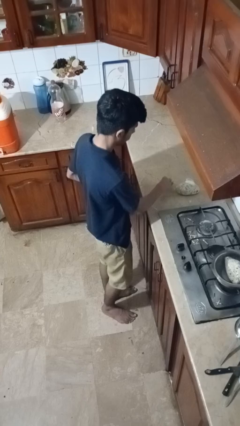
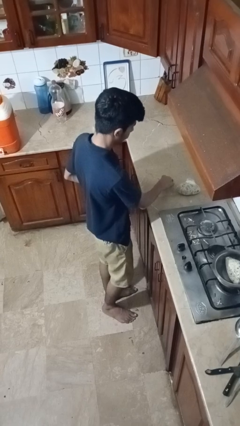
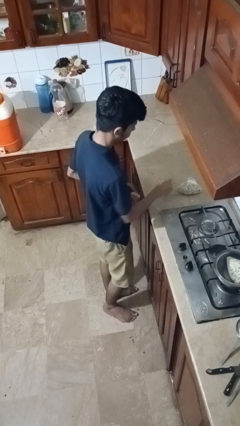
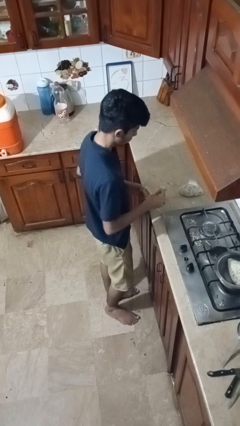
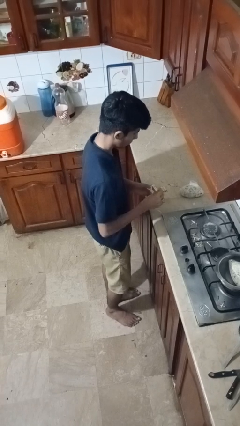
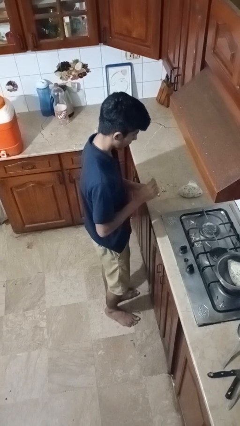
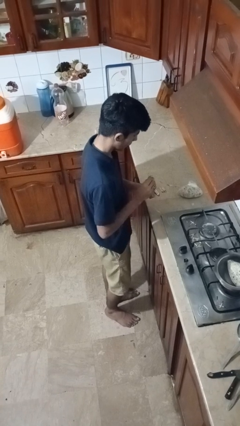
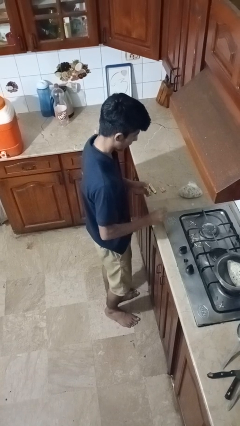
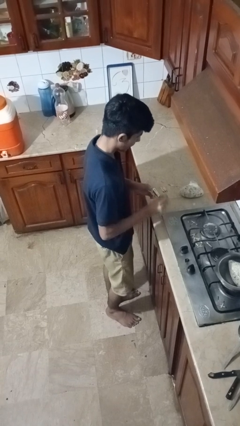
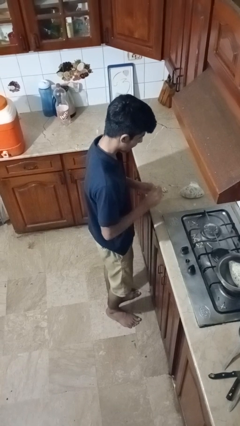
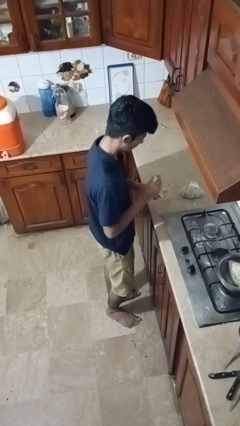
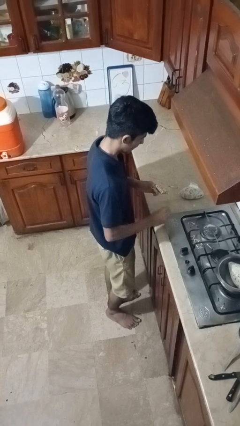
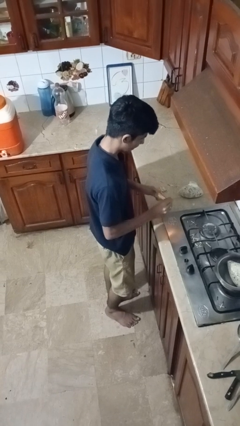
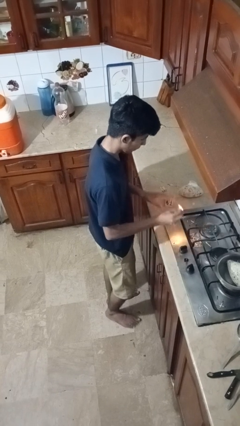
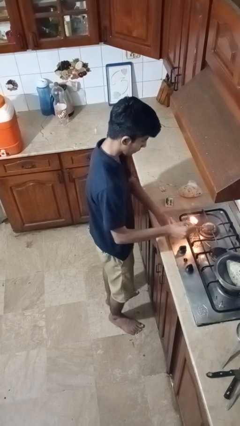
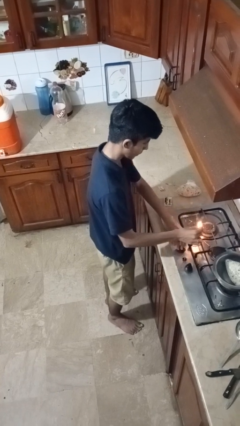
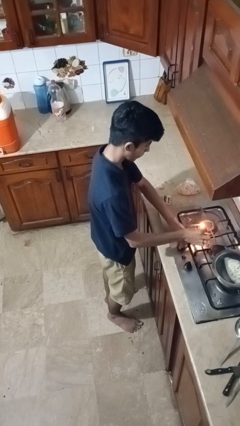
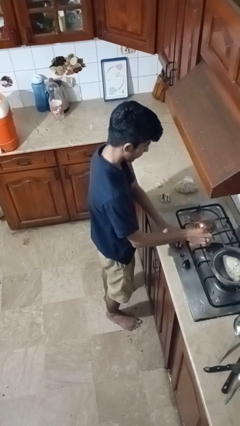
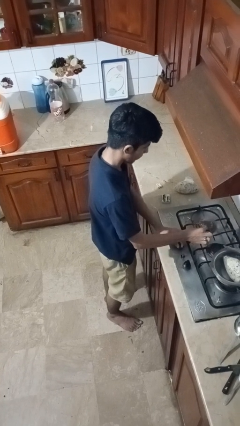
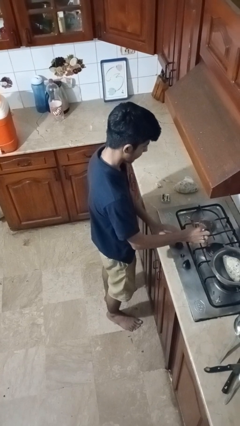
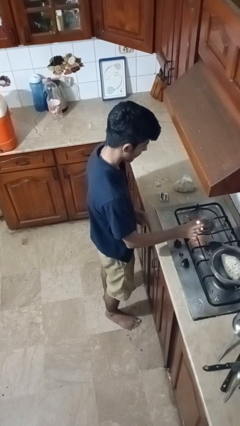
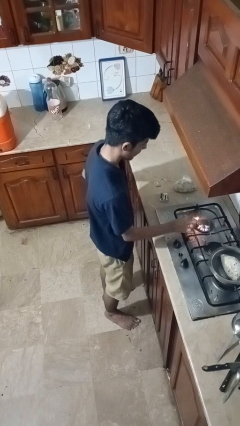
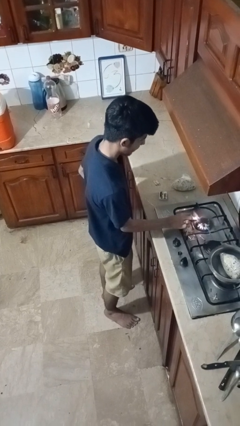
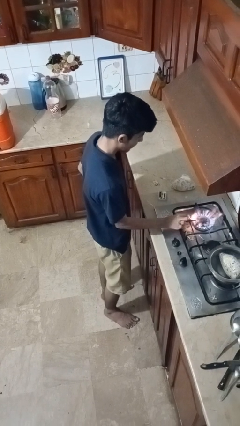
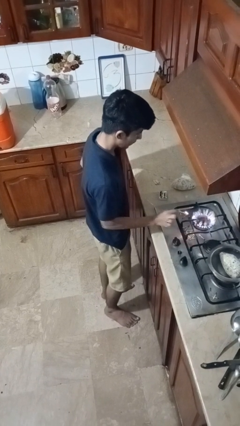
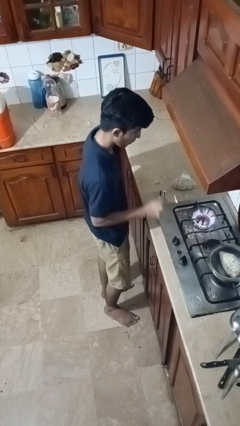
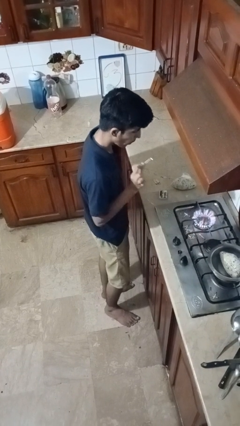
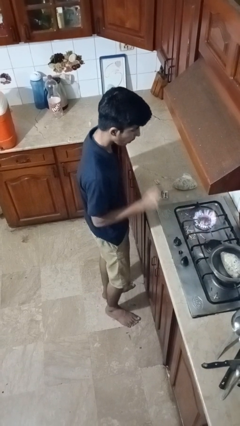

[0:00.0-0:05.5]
person turns on stovetop

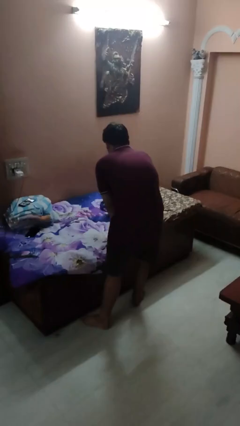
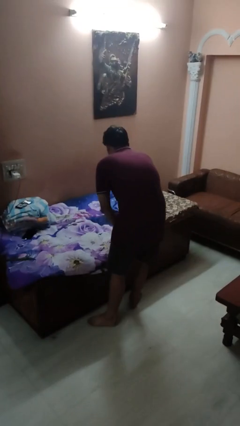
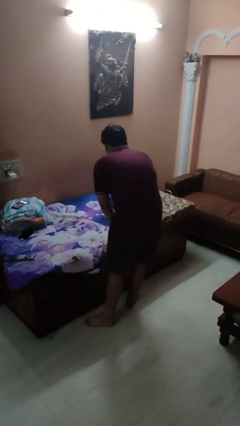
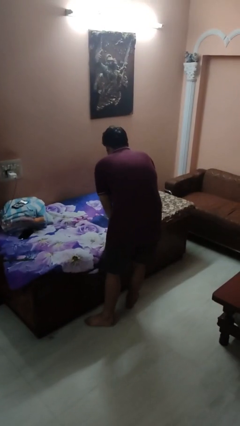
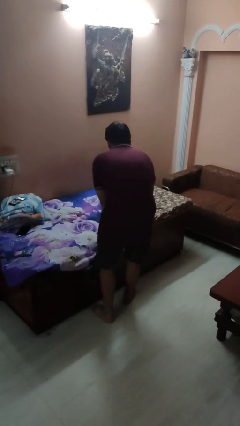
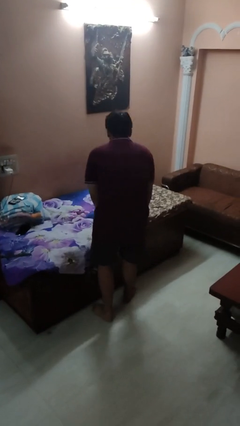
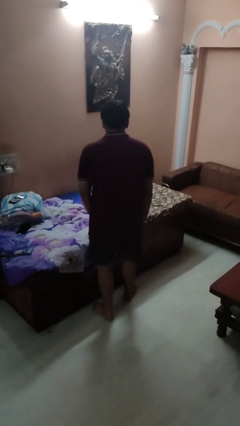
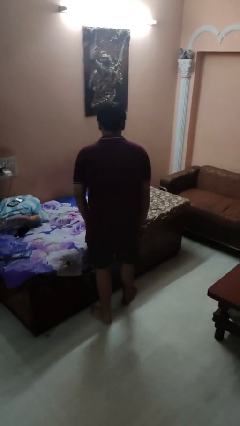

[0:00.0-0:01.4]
person makes bed

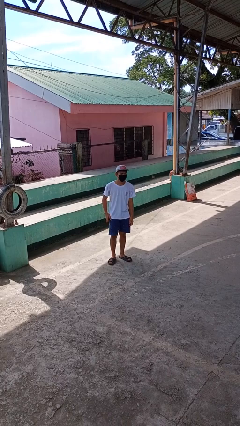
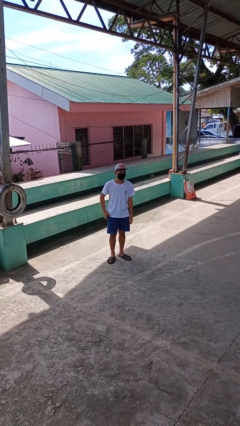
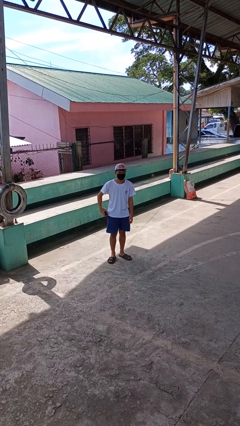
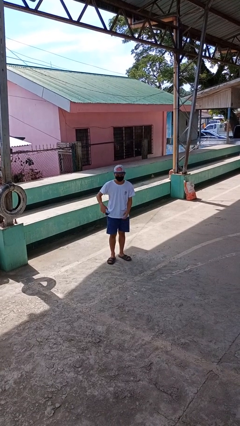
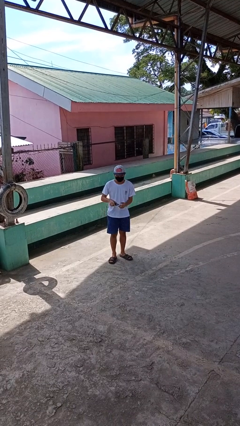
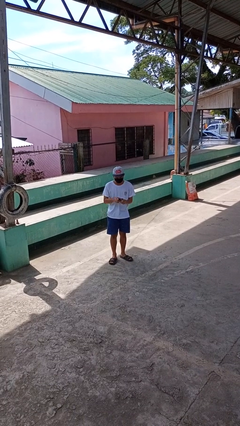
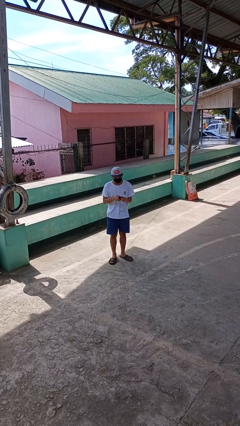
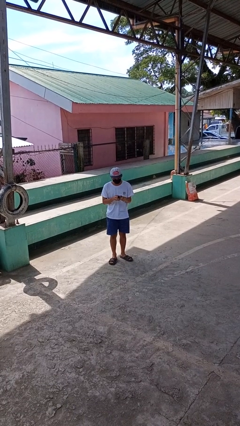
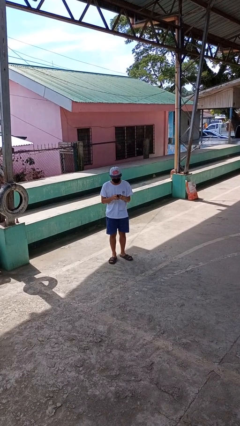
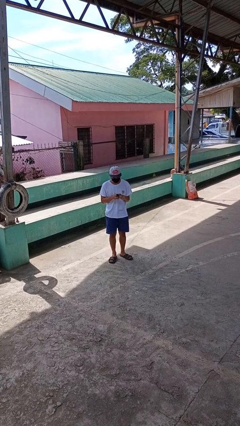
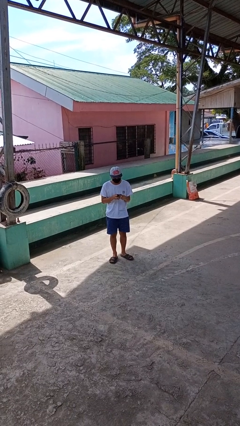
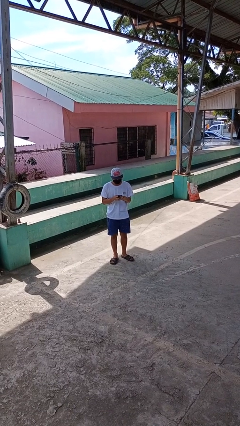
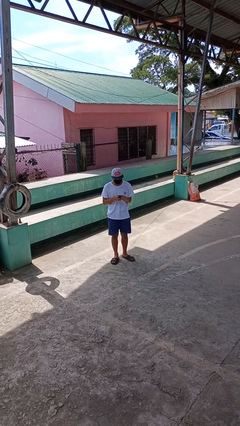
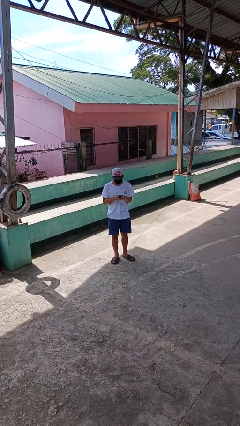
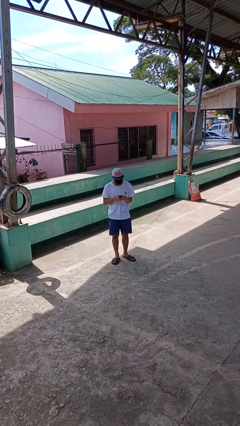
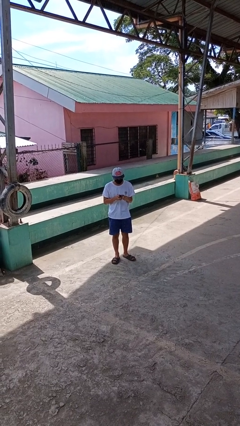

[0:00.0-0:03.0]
person takes phone from pocket

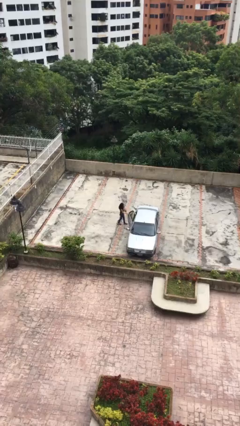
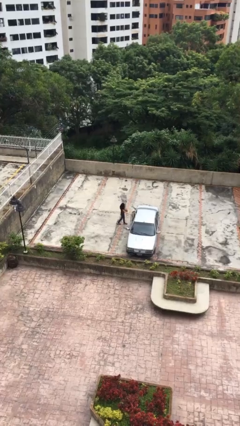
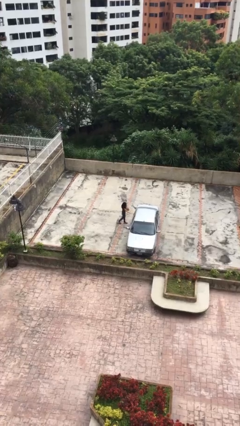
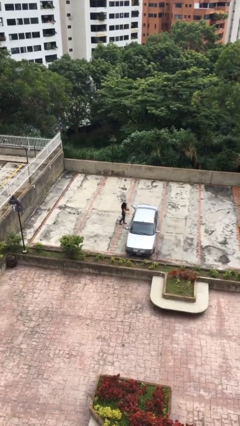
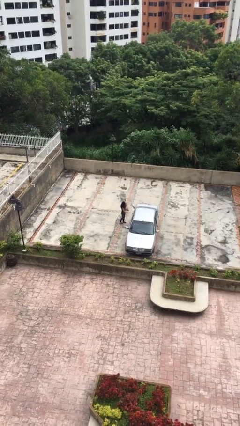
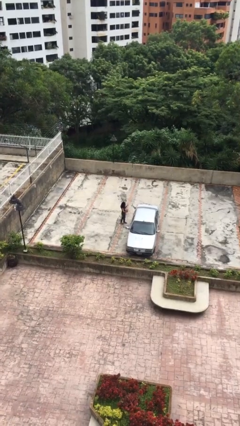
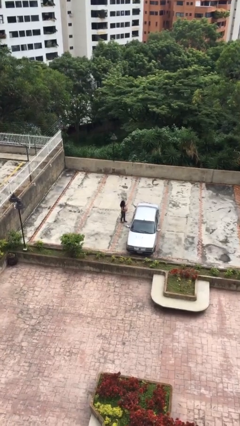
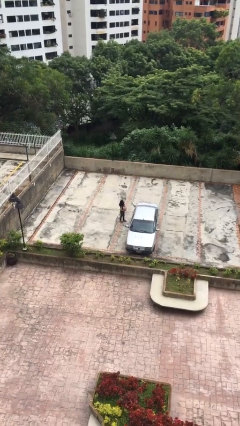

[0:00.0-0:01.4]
person closes car door

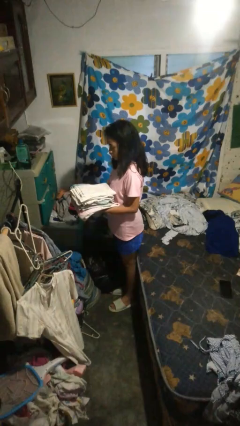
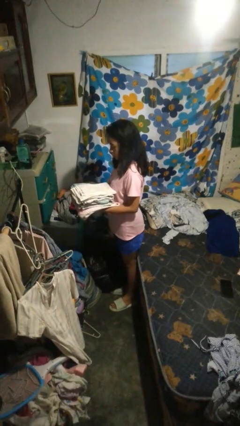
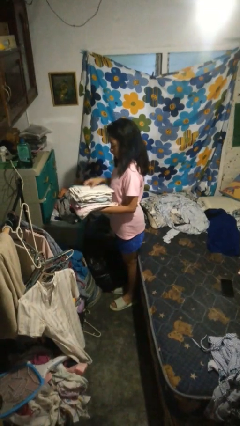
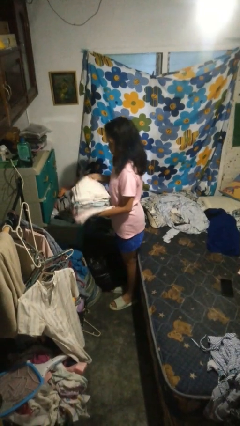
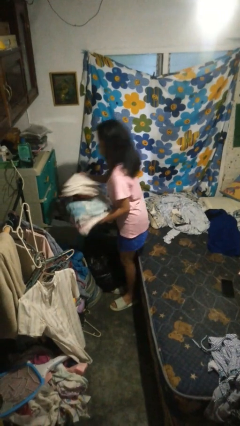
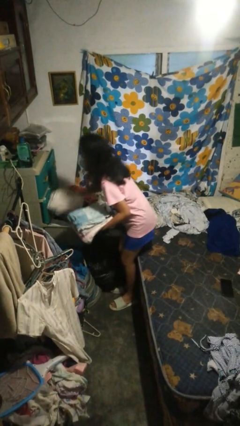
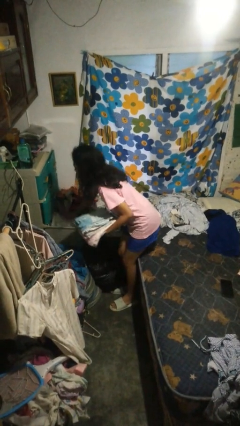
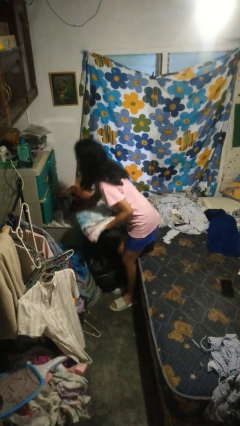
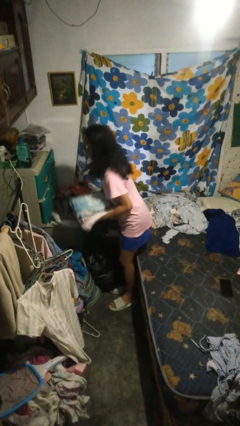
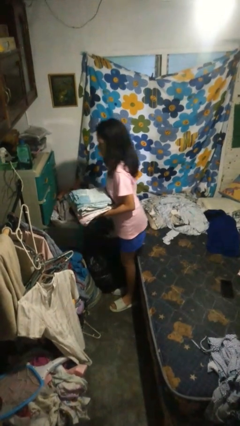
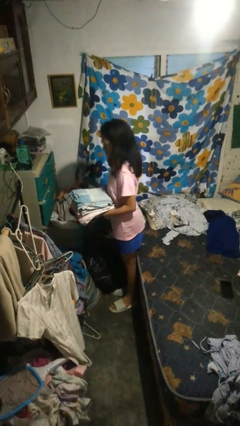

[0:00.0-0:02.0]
person puts clothes into dresser

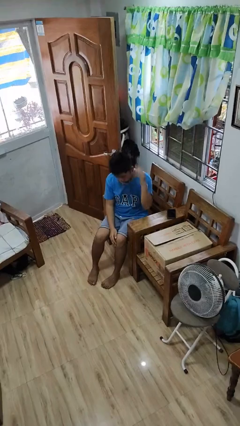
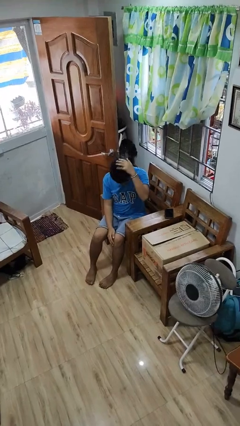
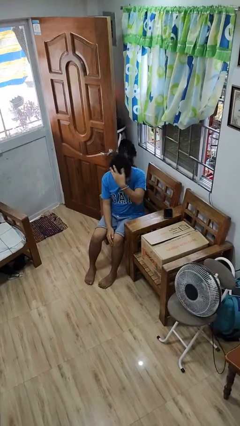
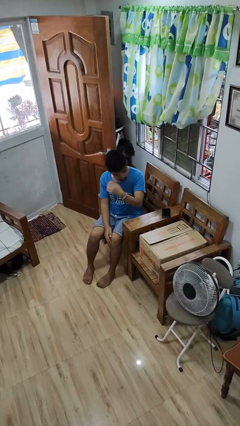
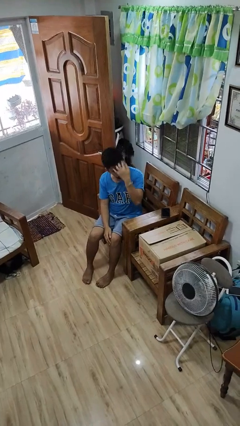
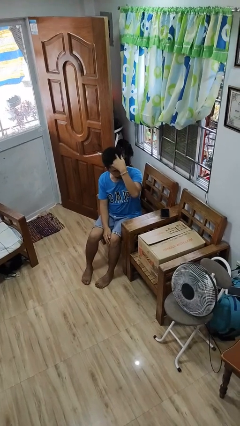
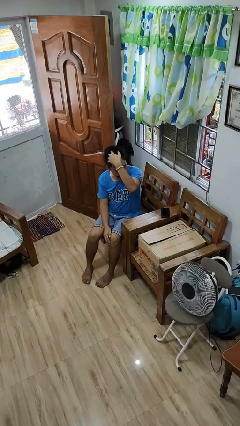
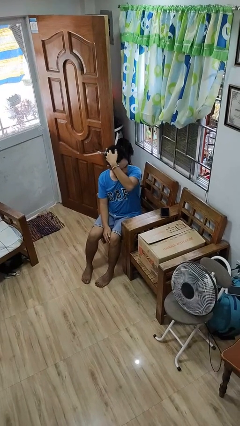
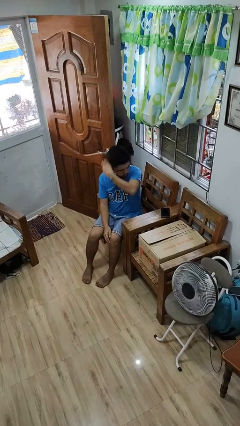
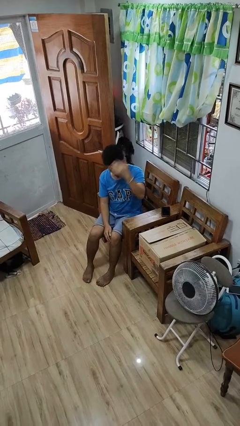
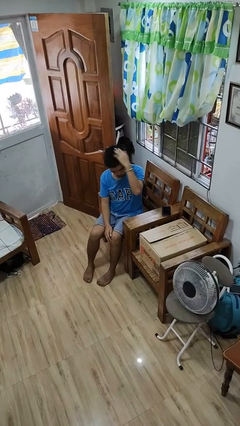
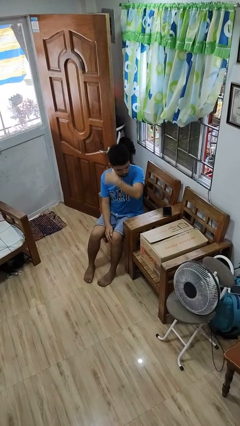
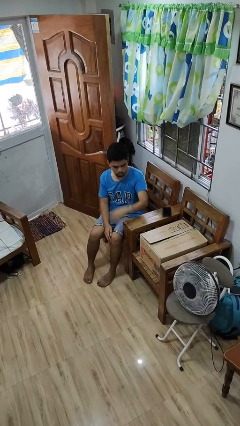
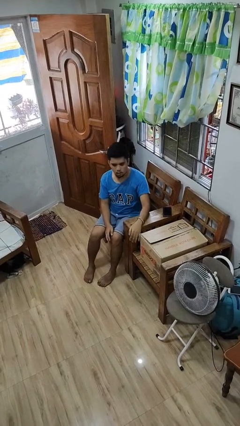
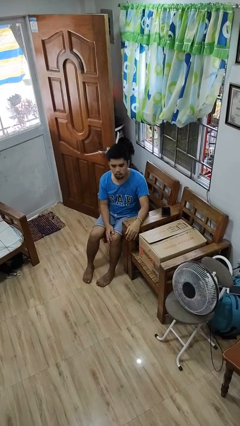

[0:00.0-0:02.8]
person strokes hair

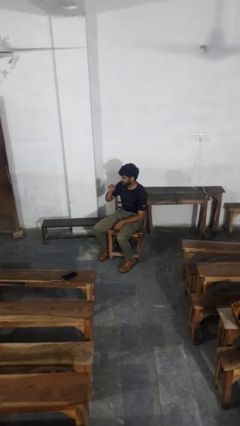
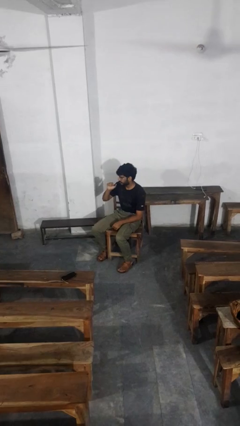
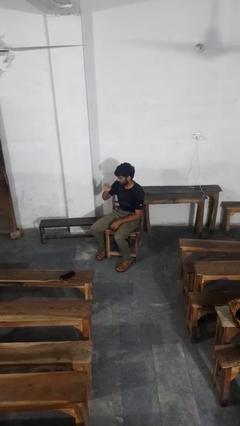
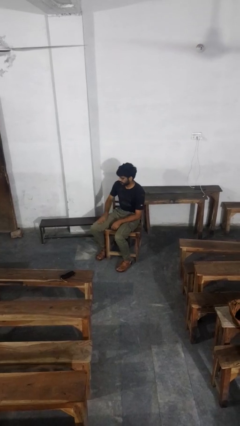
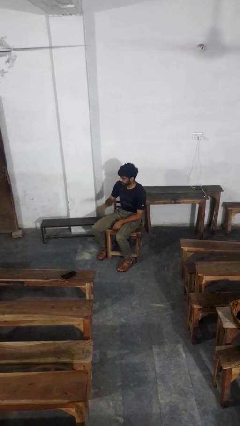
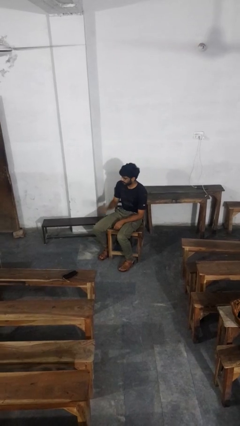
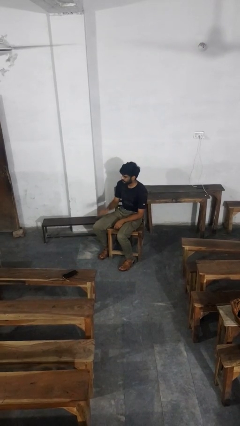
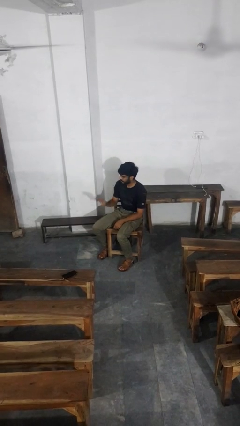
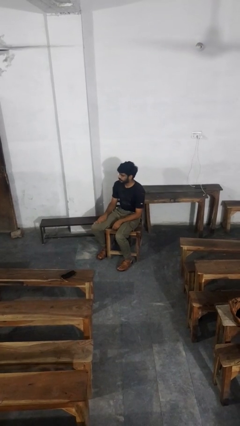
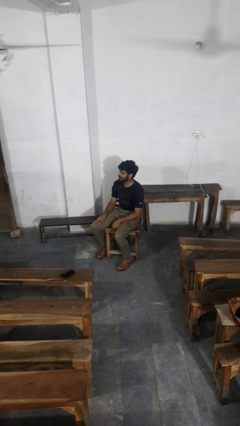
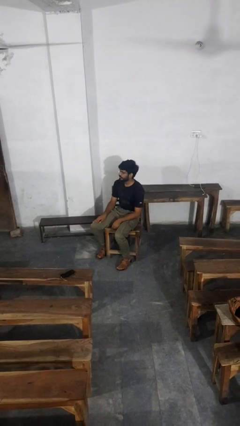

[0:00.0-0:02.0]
person slaps hands on thighs
